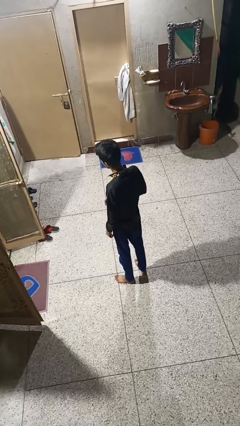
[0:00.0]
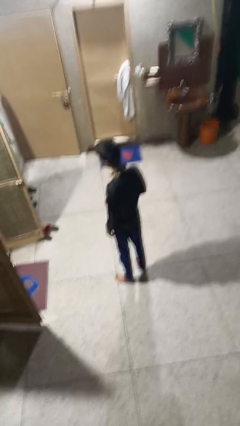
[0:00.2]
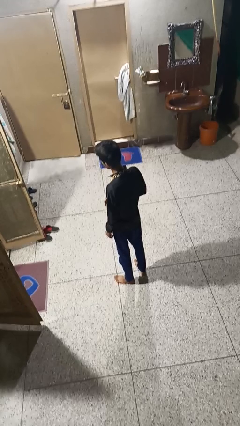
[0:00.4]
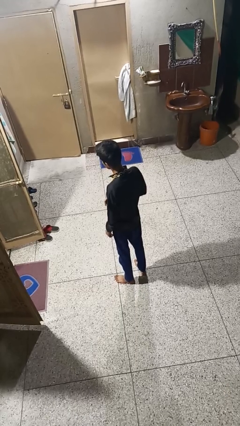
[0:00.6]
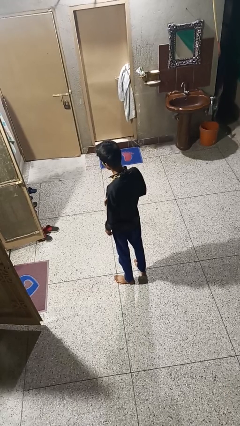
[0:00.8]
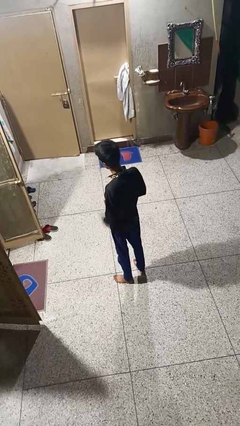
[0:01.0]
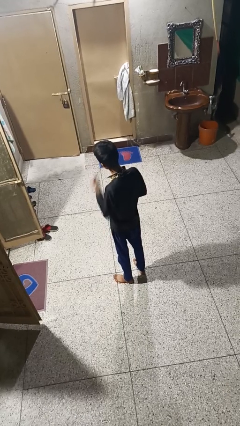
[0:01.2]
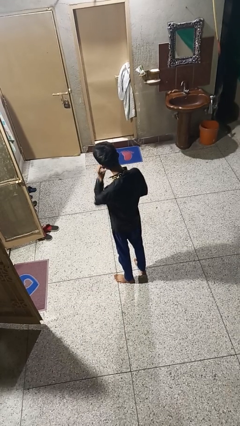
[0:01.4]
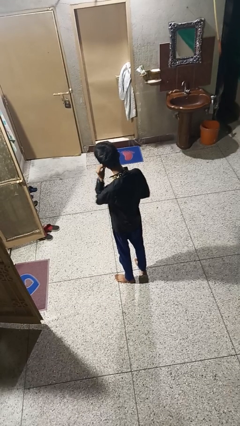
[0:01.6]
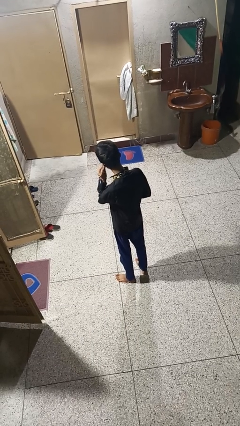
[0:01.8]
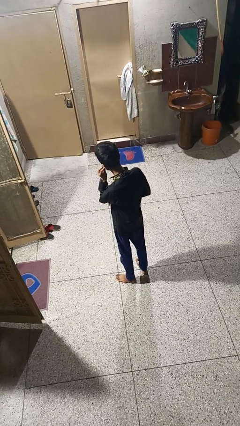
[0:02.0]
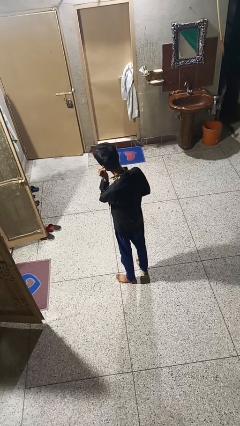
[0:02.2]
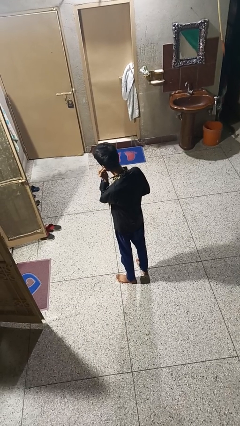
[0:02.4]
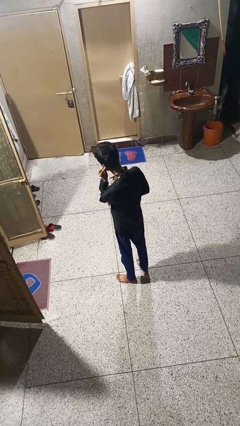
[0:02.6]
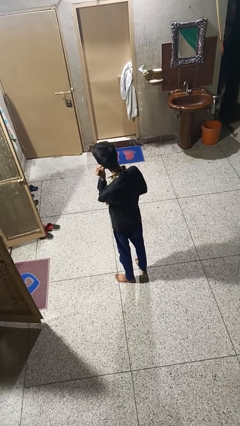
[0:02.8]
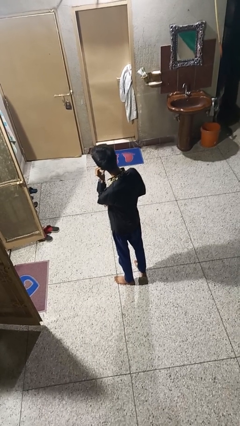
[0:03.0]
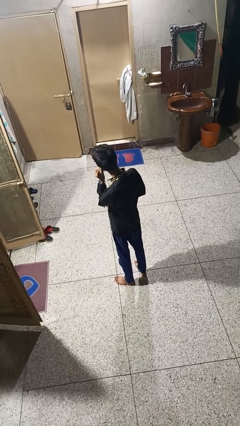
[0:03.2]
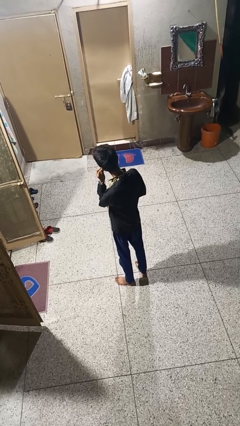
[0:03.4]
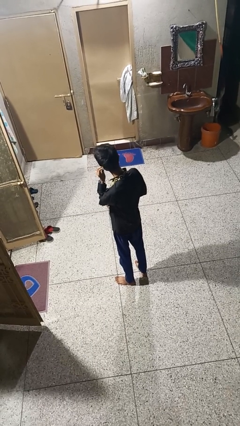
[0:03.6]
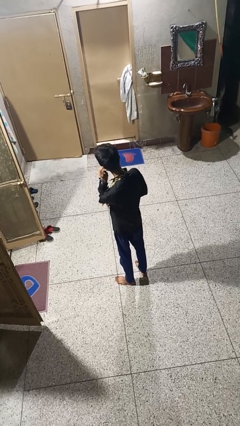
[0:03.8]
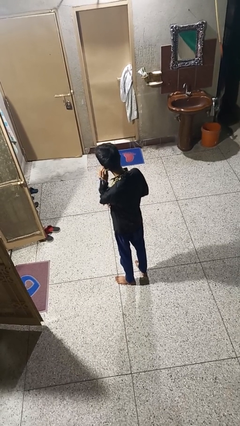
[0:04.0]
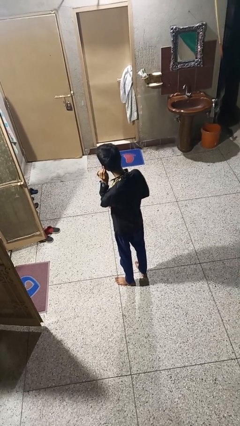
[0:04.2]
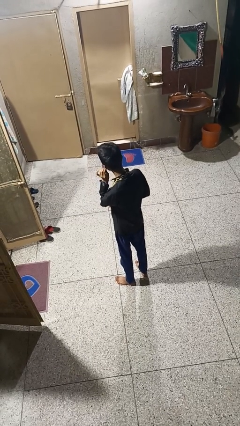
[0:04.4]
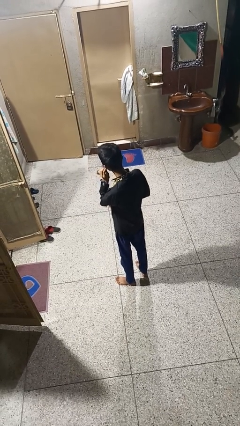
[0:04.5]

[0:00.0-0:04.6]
person touches earlobe

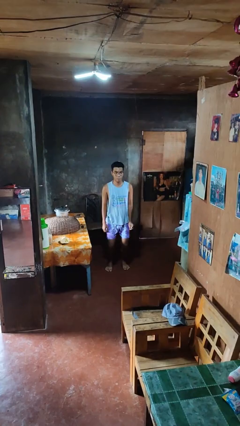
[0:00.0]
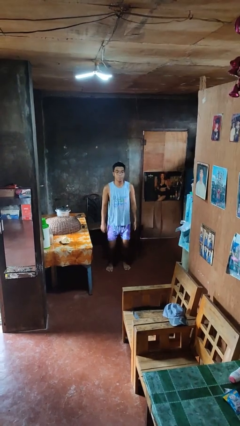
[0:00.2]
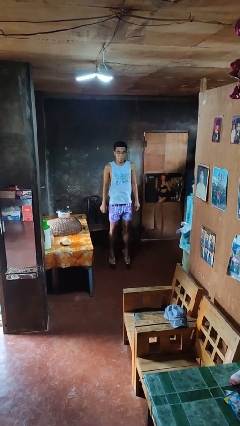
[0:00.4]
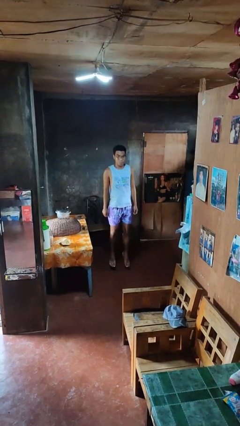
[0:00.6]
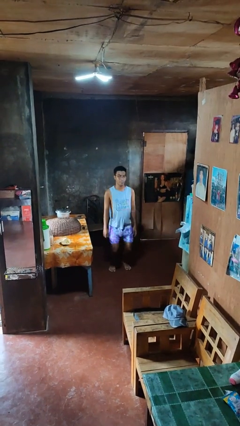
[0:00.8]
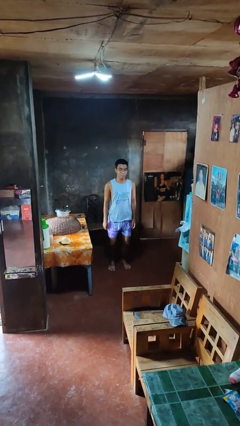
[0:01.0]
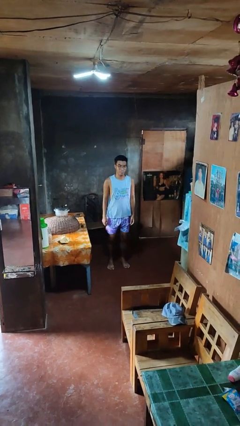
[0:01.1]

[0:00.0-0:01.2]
person jumps

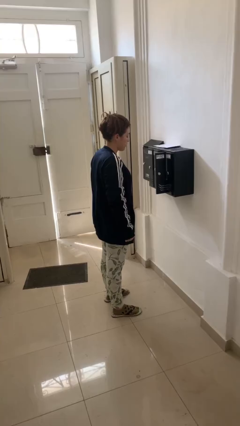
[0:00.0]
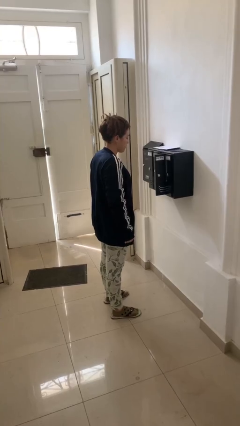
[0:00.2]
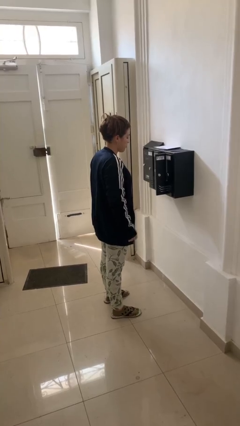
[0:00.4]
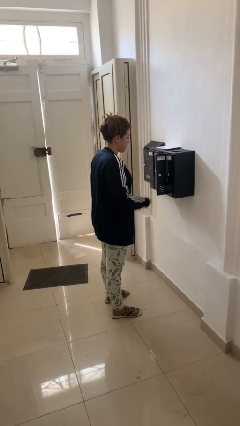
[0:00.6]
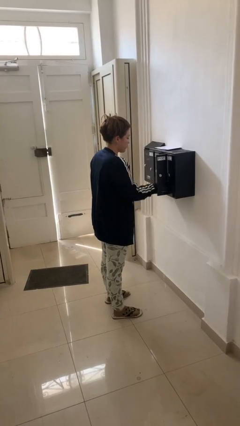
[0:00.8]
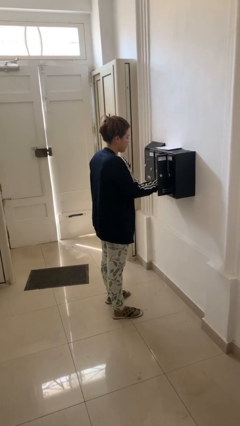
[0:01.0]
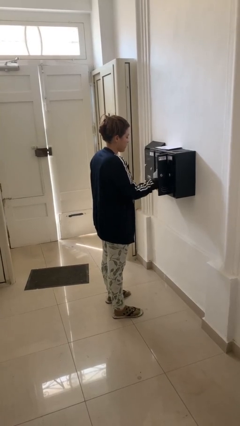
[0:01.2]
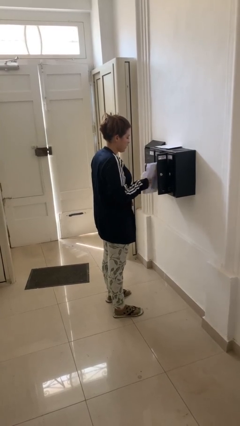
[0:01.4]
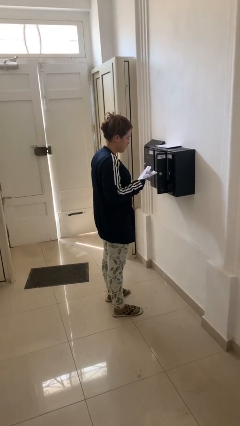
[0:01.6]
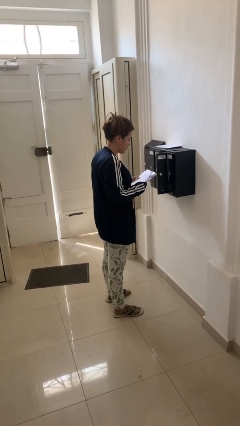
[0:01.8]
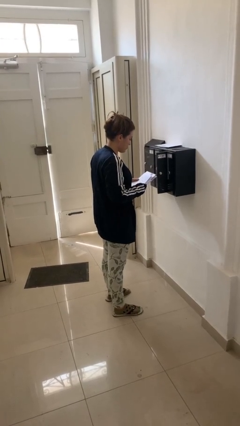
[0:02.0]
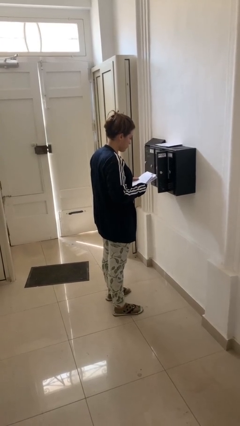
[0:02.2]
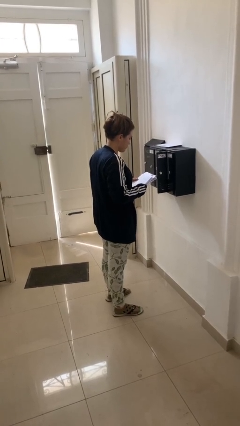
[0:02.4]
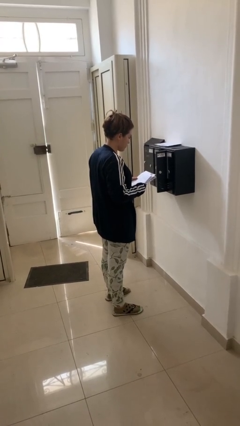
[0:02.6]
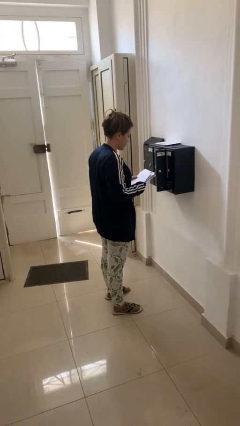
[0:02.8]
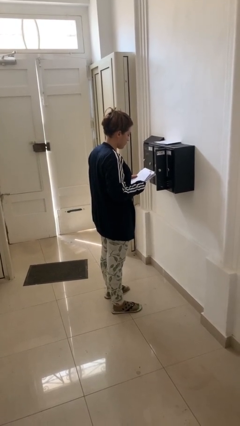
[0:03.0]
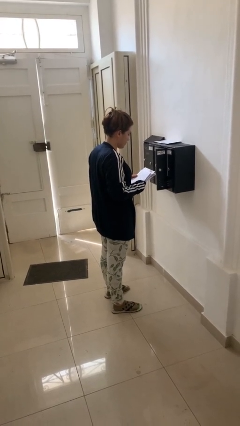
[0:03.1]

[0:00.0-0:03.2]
person takes letters from mailbox

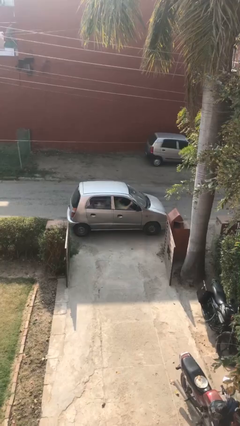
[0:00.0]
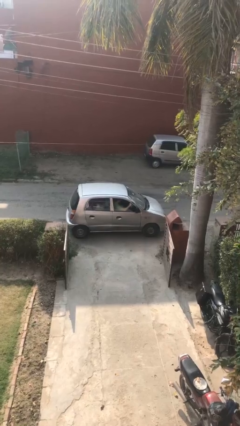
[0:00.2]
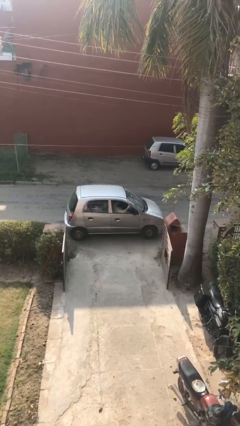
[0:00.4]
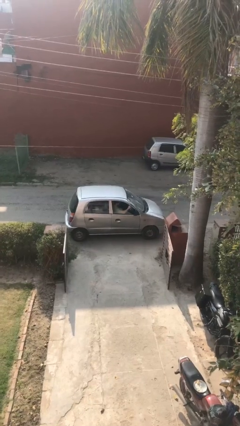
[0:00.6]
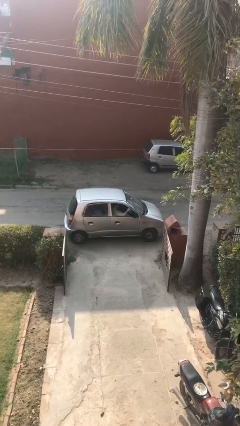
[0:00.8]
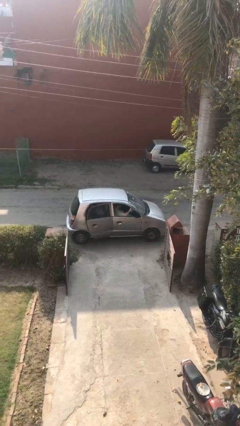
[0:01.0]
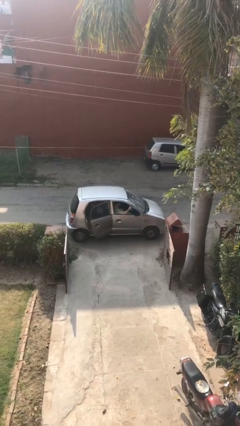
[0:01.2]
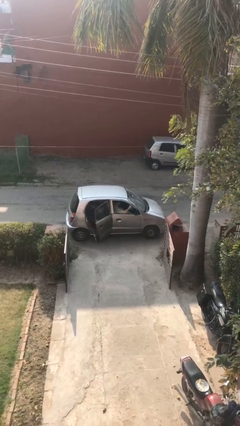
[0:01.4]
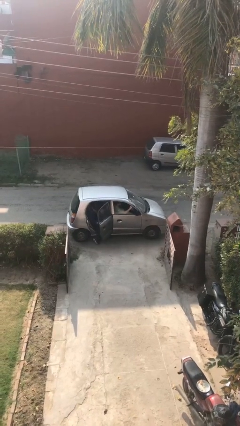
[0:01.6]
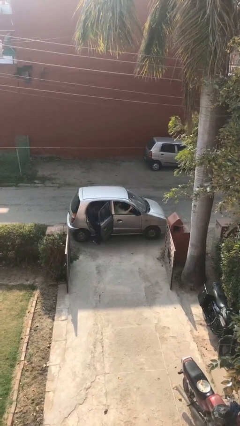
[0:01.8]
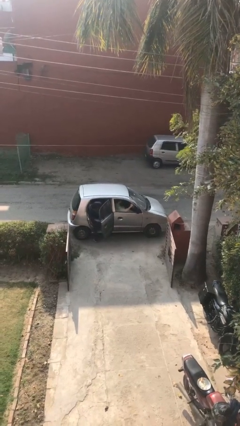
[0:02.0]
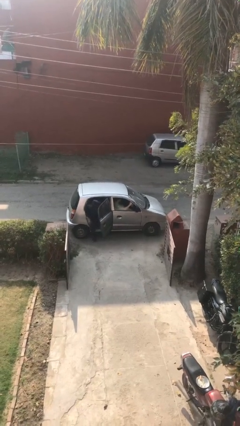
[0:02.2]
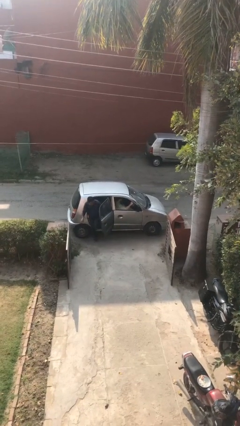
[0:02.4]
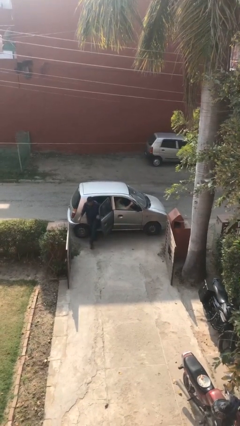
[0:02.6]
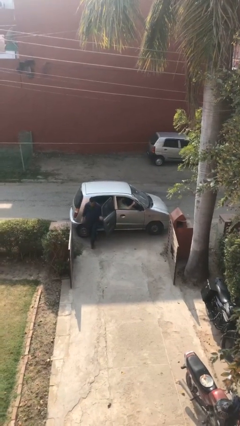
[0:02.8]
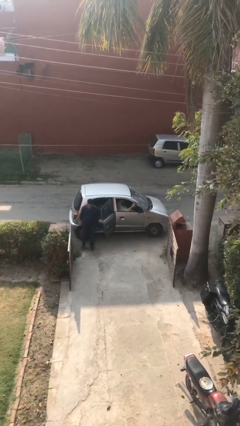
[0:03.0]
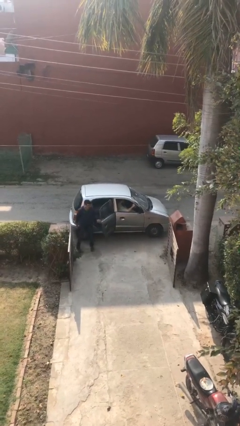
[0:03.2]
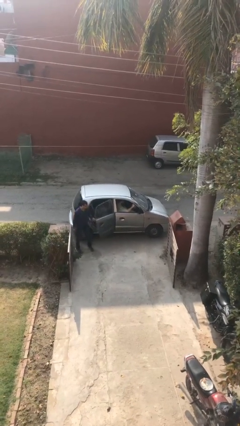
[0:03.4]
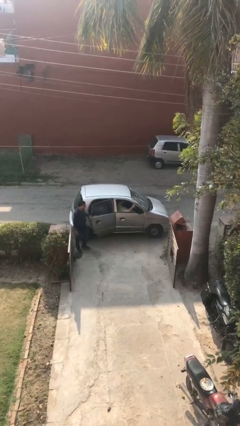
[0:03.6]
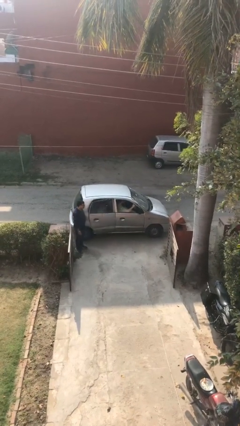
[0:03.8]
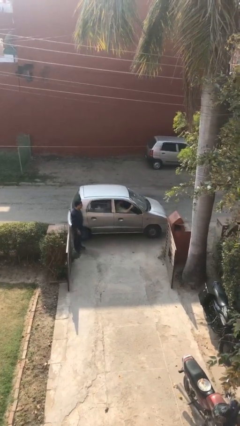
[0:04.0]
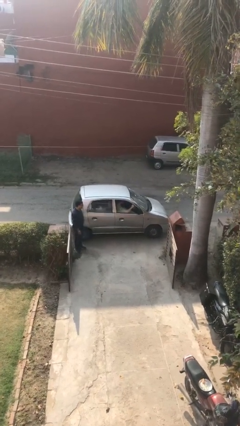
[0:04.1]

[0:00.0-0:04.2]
car drops off person

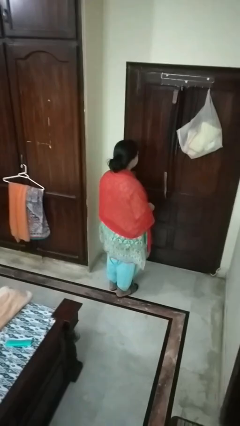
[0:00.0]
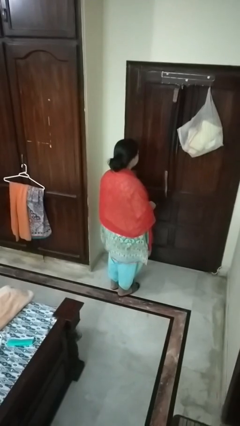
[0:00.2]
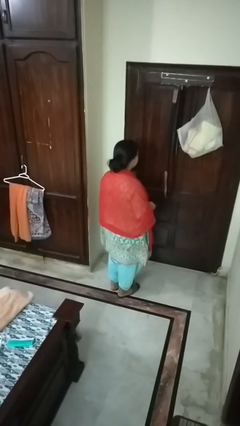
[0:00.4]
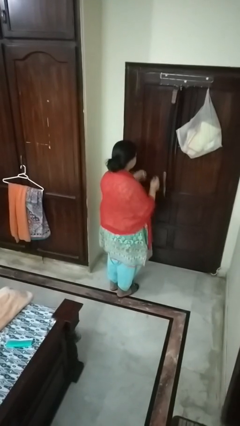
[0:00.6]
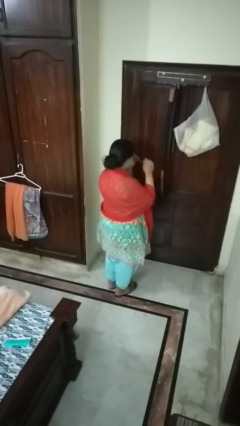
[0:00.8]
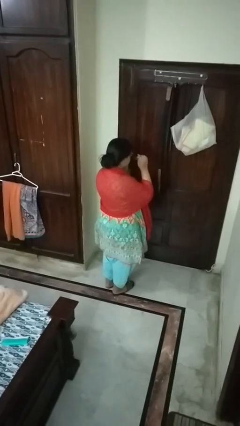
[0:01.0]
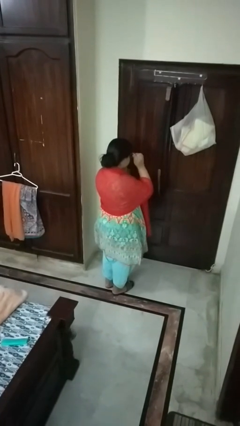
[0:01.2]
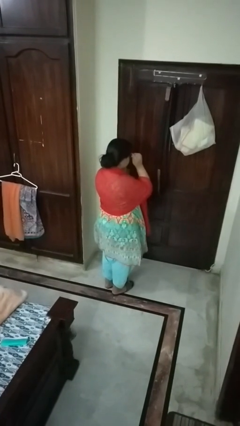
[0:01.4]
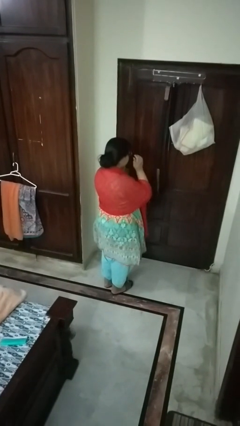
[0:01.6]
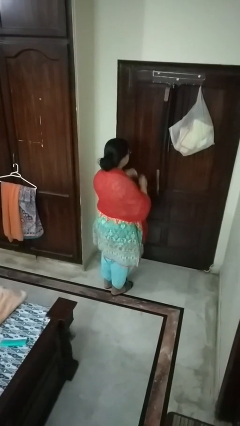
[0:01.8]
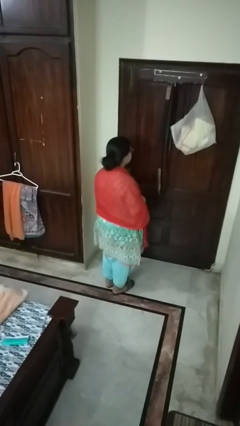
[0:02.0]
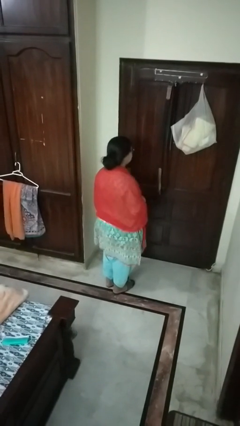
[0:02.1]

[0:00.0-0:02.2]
person puts on glasses

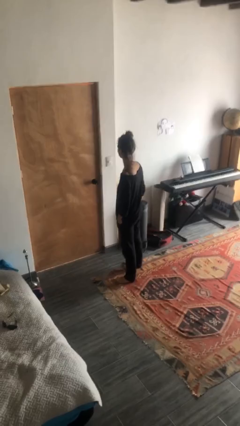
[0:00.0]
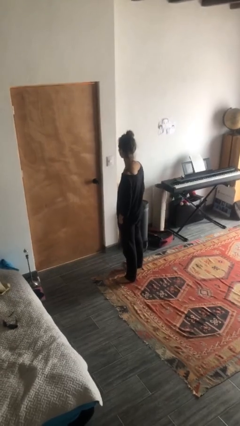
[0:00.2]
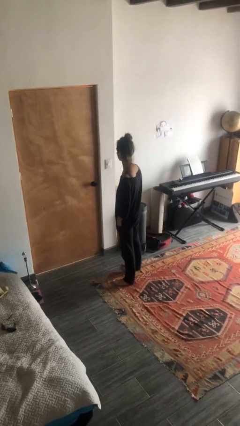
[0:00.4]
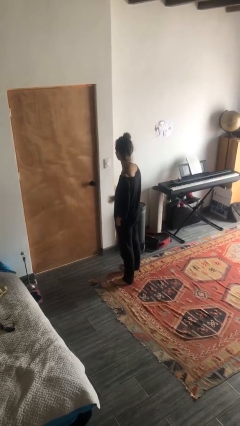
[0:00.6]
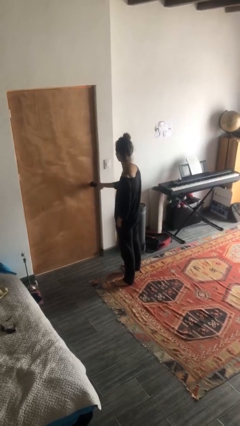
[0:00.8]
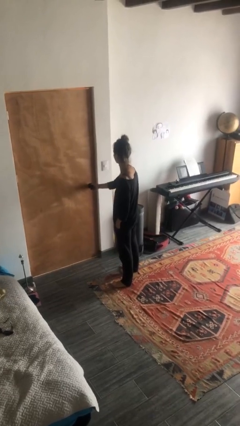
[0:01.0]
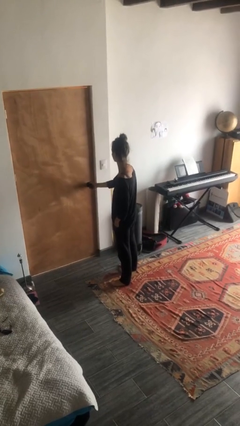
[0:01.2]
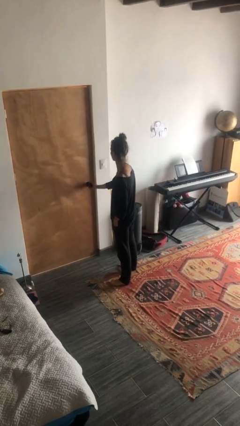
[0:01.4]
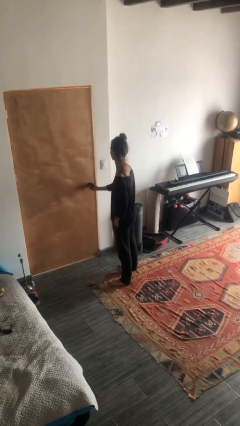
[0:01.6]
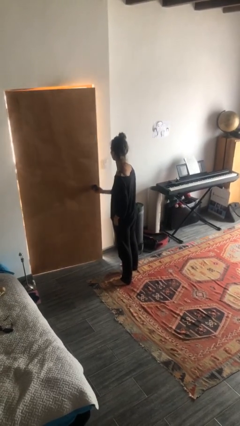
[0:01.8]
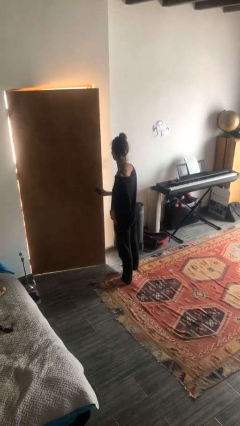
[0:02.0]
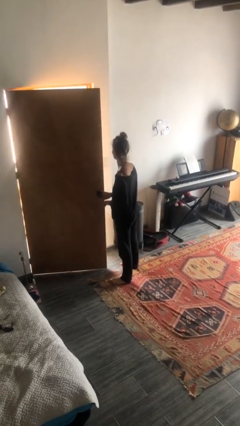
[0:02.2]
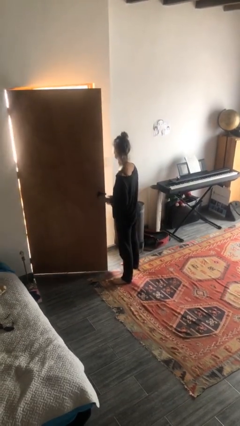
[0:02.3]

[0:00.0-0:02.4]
person opens facility door
